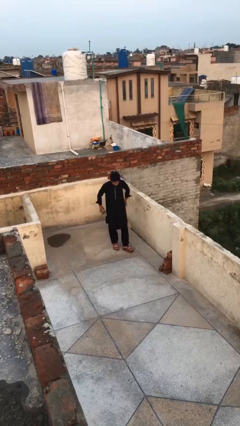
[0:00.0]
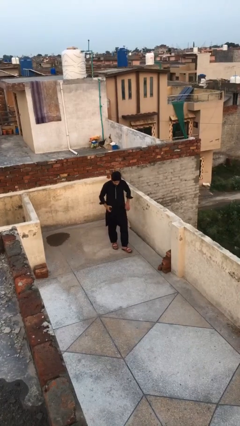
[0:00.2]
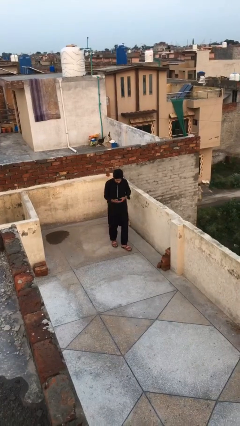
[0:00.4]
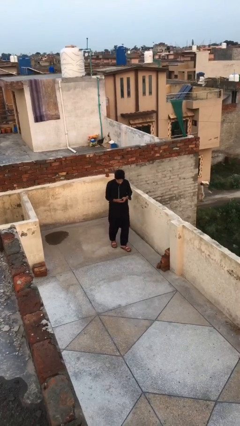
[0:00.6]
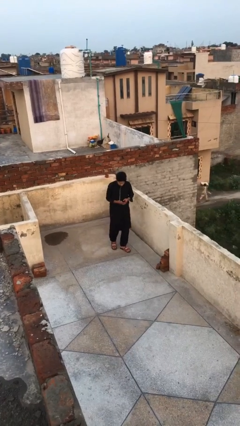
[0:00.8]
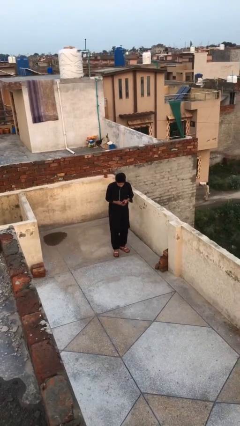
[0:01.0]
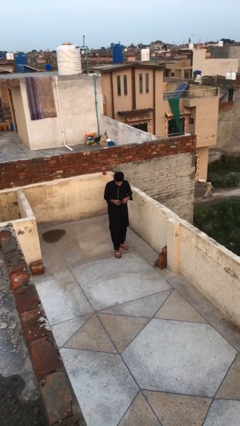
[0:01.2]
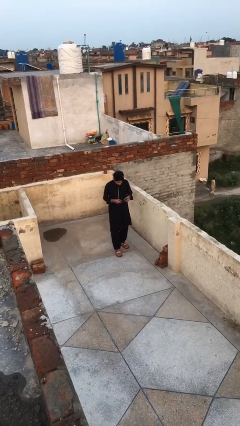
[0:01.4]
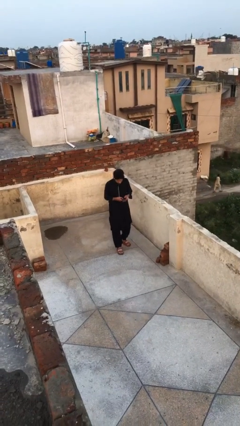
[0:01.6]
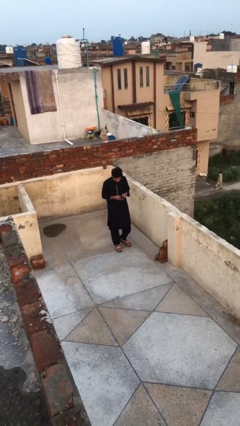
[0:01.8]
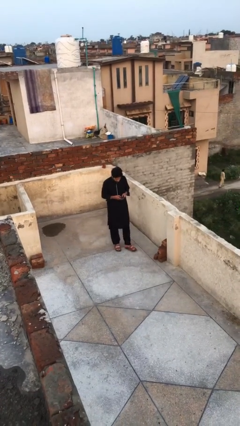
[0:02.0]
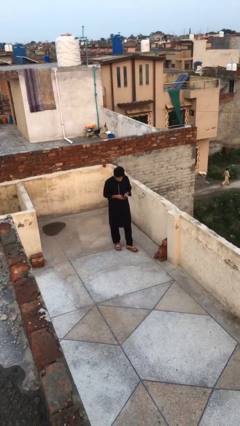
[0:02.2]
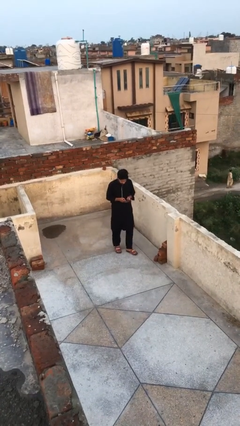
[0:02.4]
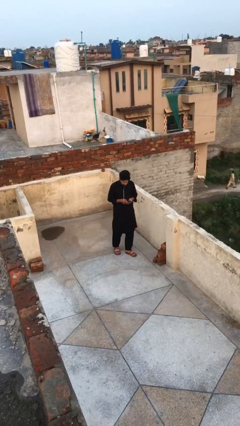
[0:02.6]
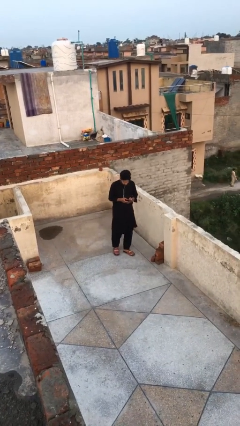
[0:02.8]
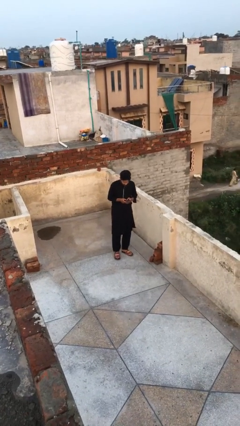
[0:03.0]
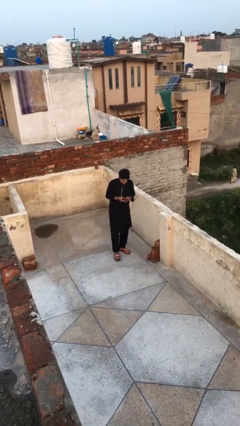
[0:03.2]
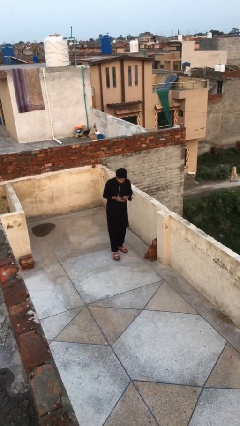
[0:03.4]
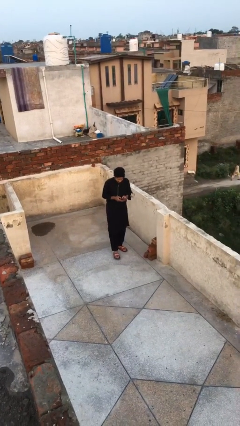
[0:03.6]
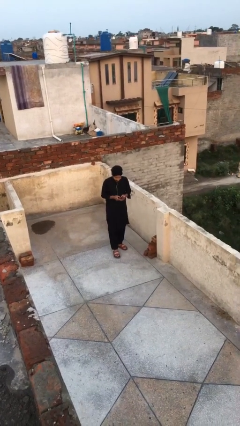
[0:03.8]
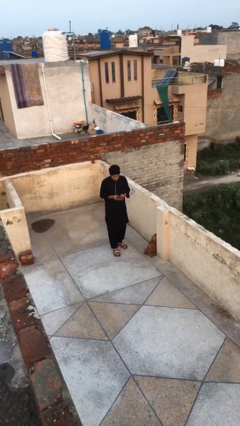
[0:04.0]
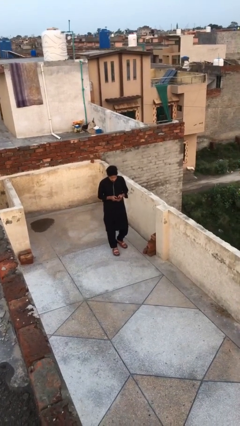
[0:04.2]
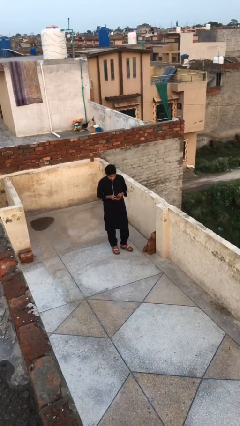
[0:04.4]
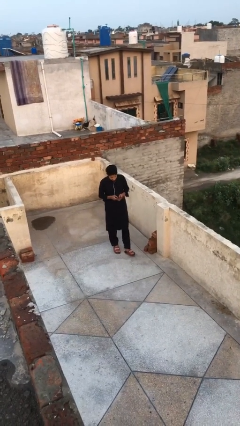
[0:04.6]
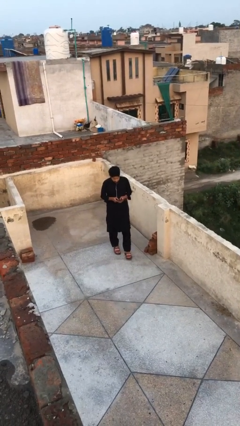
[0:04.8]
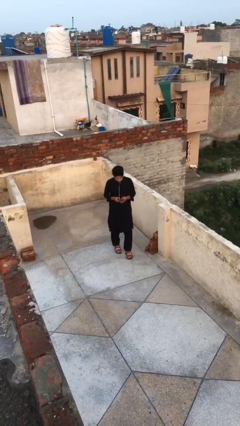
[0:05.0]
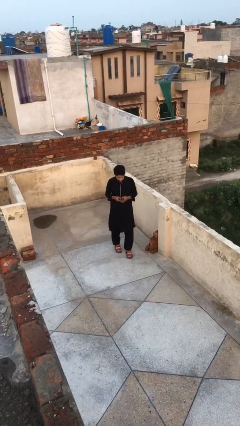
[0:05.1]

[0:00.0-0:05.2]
person texts on phone

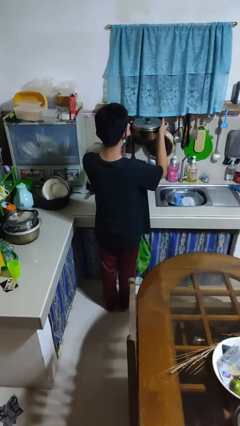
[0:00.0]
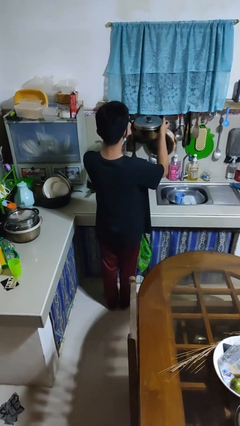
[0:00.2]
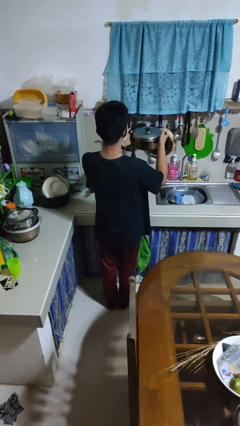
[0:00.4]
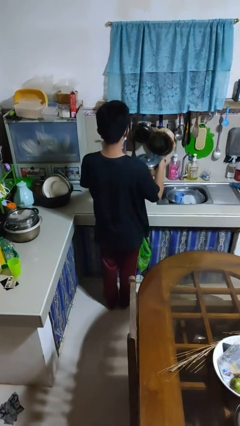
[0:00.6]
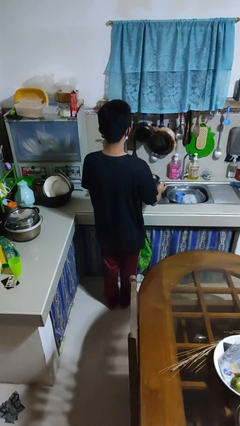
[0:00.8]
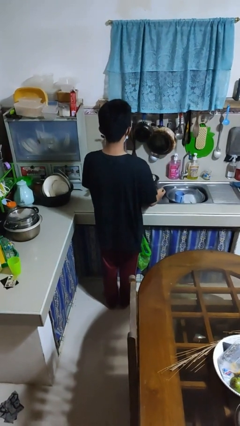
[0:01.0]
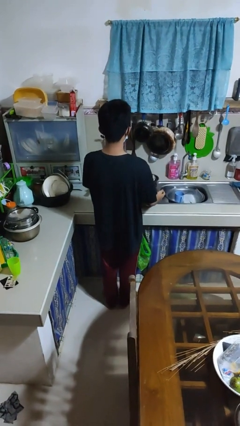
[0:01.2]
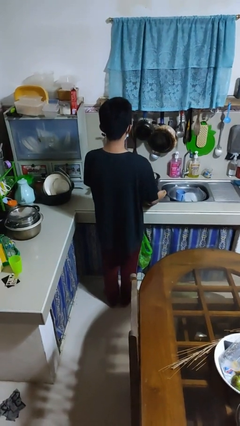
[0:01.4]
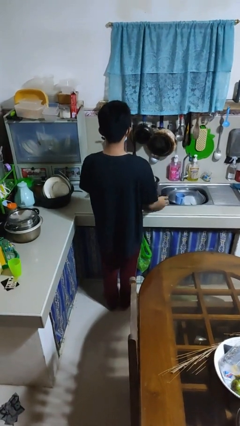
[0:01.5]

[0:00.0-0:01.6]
person puts down object on countertop

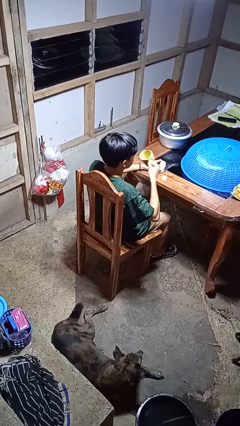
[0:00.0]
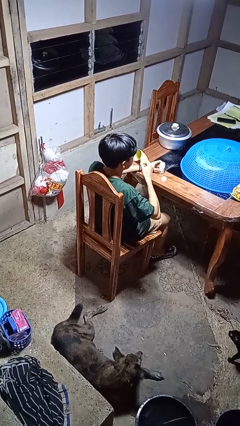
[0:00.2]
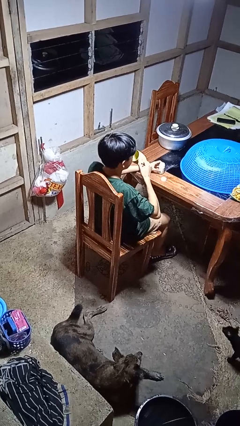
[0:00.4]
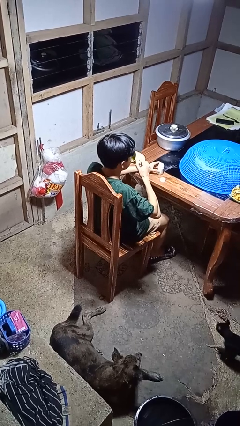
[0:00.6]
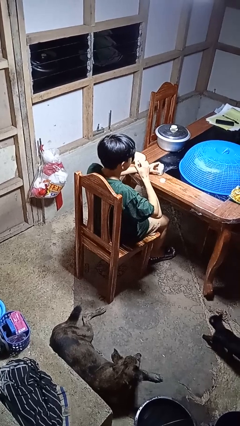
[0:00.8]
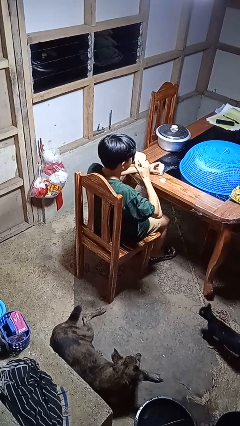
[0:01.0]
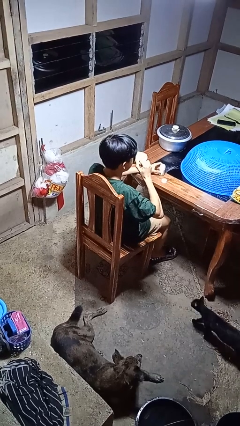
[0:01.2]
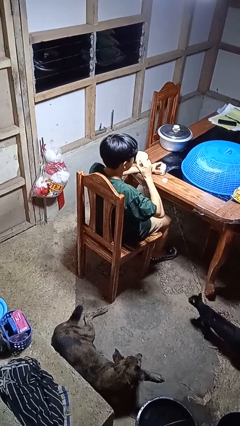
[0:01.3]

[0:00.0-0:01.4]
person drinks from cup

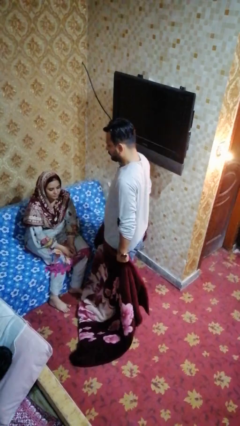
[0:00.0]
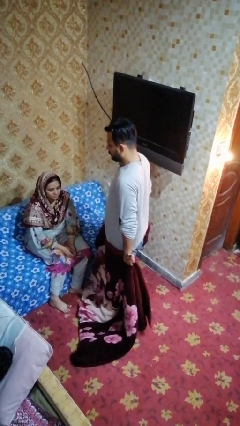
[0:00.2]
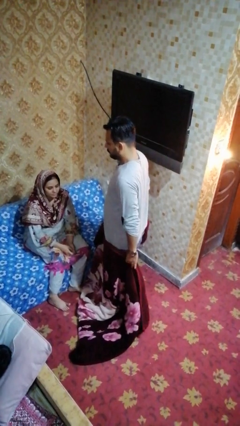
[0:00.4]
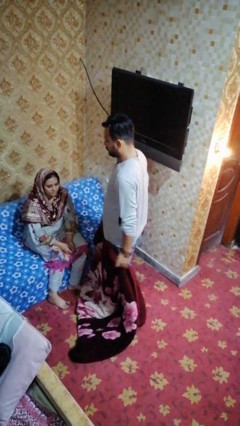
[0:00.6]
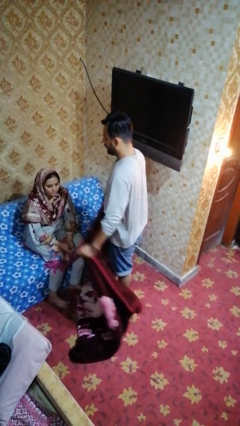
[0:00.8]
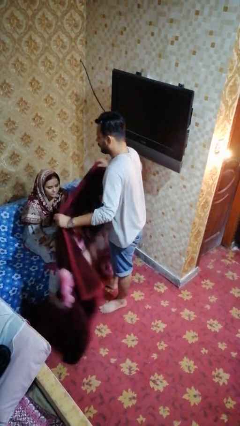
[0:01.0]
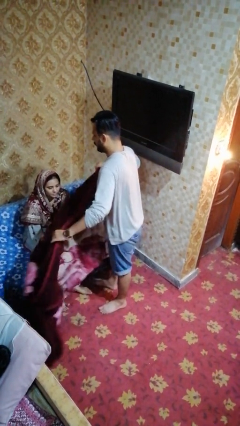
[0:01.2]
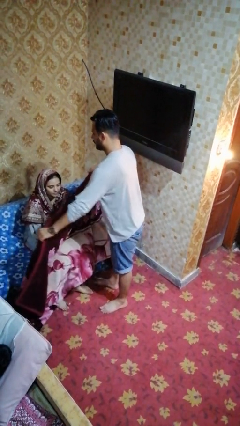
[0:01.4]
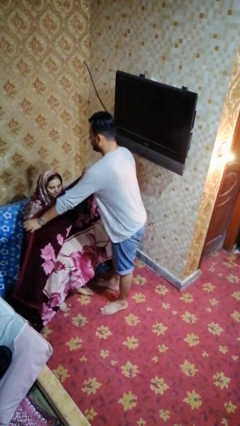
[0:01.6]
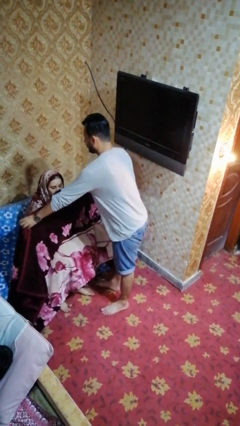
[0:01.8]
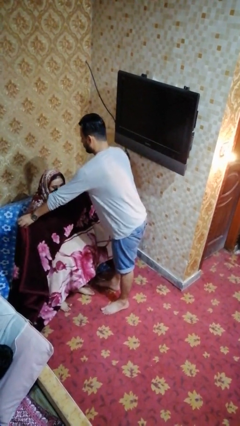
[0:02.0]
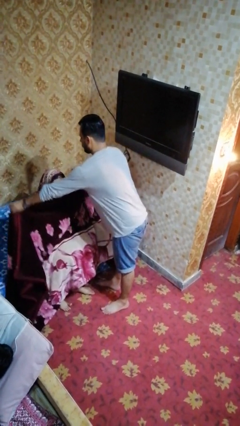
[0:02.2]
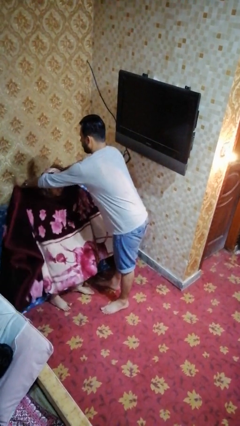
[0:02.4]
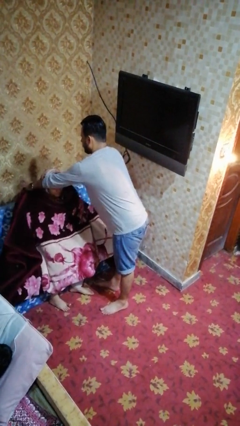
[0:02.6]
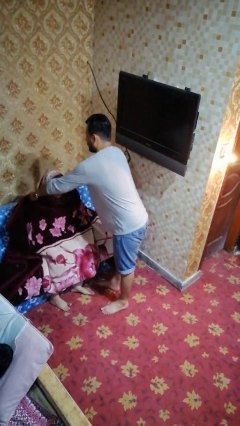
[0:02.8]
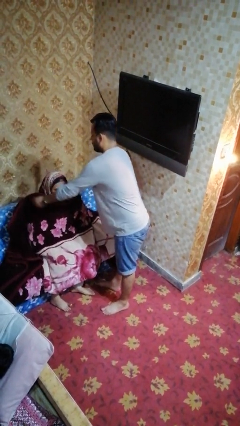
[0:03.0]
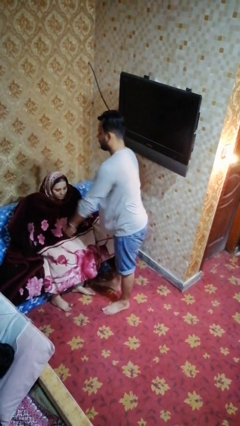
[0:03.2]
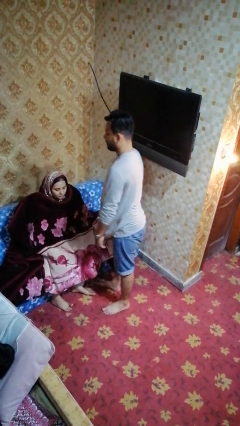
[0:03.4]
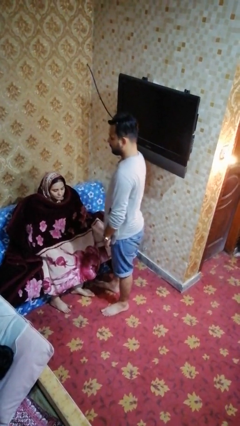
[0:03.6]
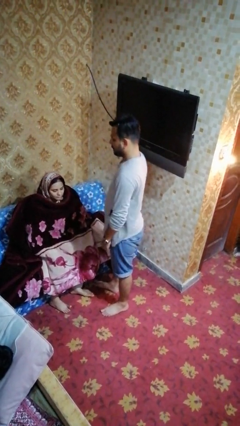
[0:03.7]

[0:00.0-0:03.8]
person covers friend with blanket

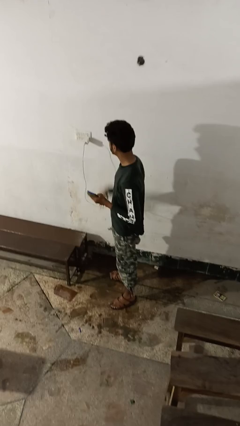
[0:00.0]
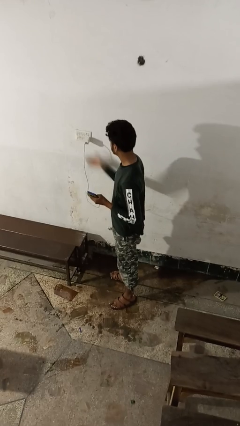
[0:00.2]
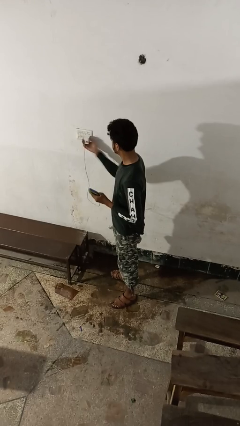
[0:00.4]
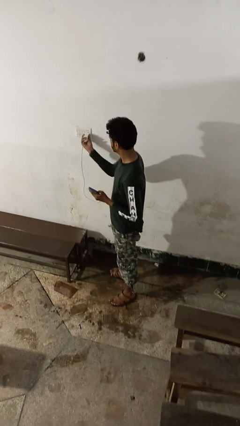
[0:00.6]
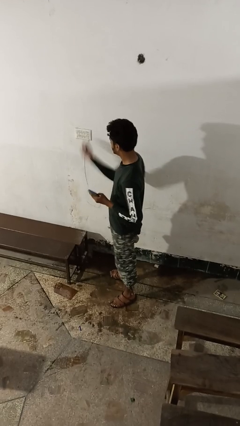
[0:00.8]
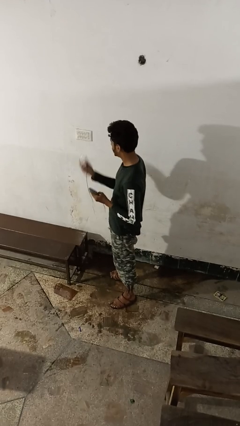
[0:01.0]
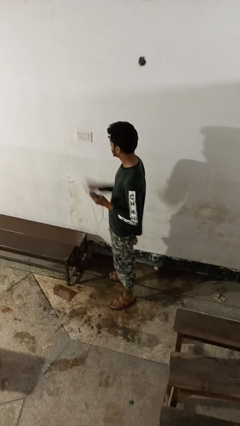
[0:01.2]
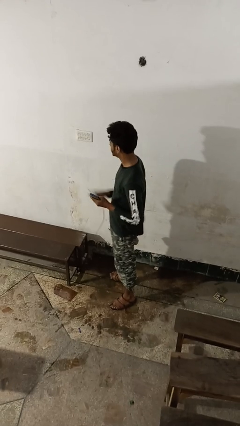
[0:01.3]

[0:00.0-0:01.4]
person unplugs from electrical socket

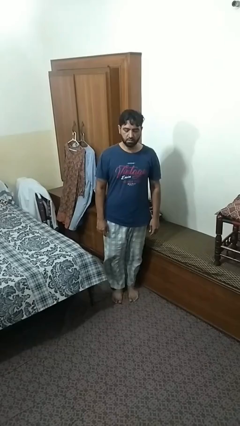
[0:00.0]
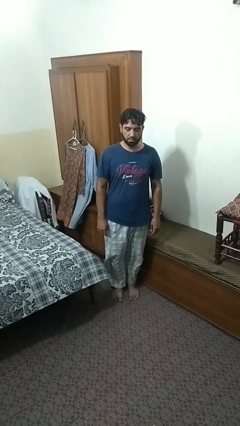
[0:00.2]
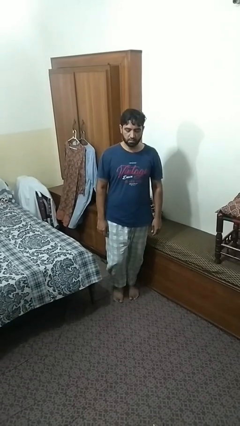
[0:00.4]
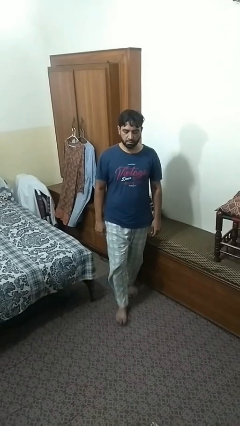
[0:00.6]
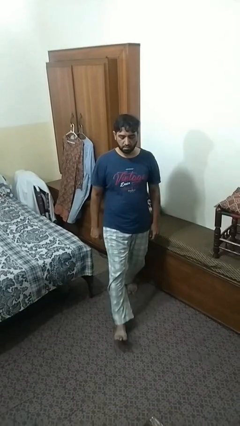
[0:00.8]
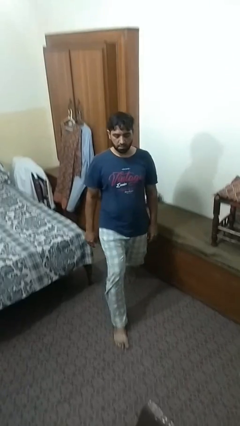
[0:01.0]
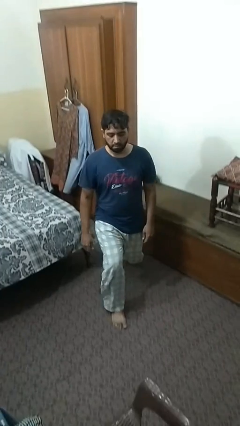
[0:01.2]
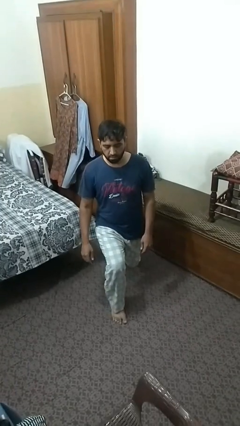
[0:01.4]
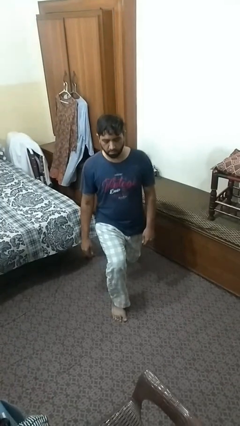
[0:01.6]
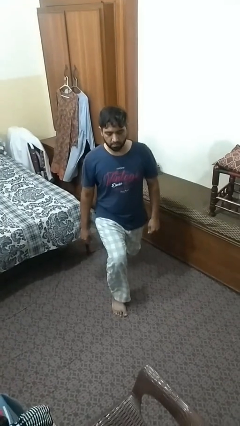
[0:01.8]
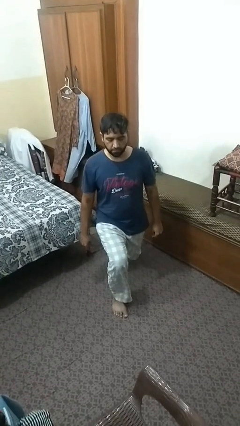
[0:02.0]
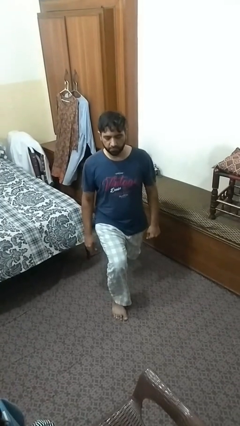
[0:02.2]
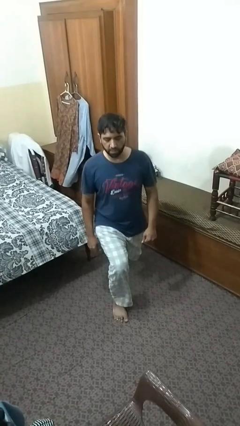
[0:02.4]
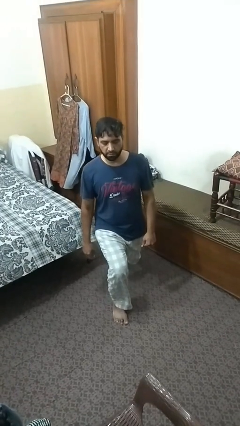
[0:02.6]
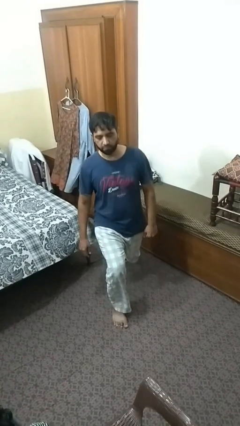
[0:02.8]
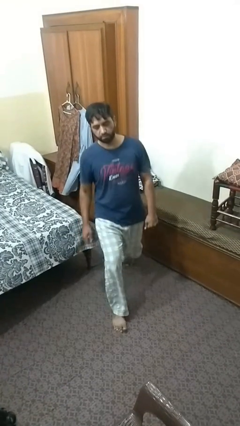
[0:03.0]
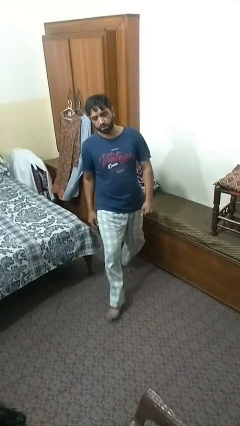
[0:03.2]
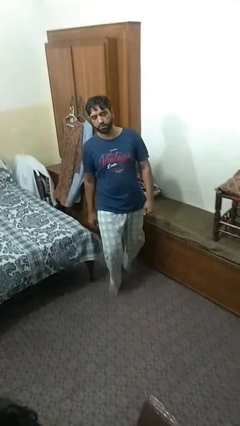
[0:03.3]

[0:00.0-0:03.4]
person exercises with lunges

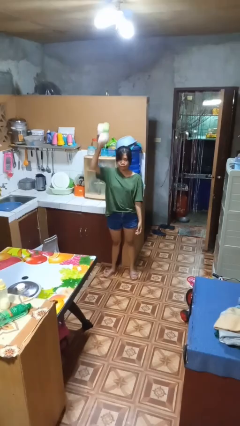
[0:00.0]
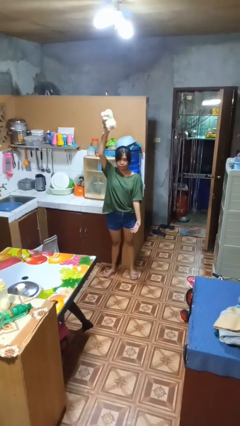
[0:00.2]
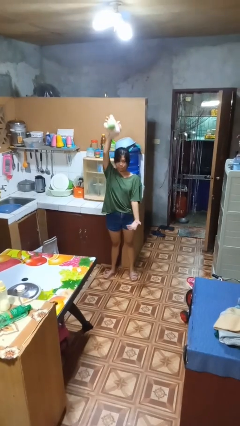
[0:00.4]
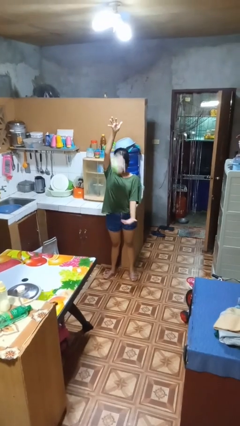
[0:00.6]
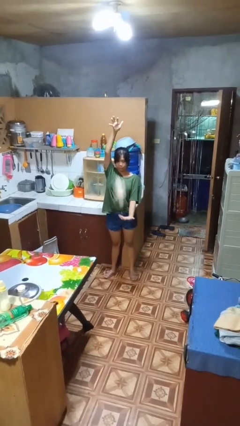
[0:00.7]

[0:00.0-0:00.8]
person drops object
